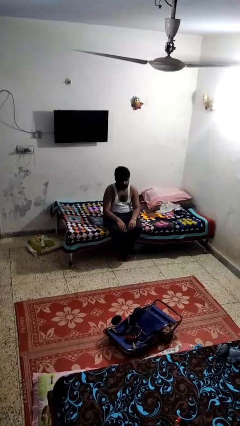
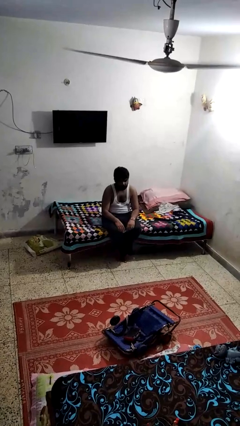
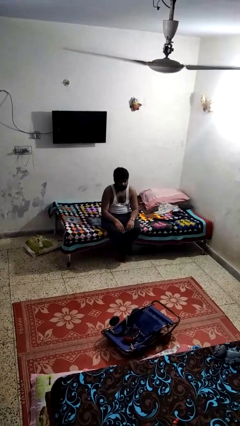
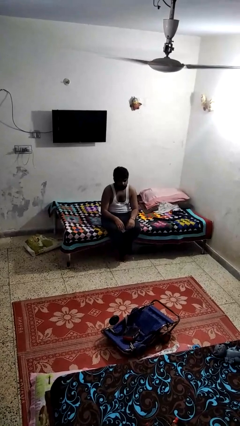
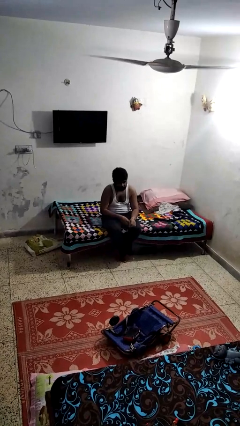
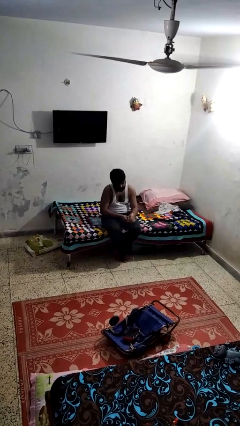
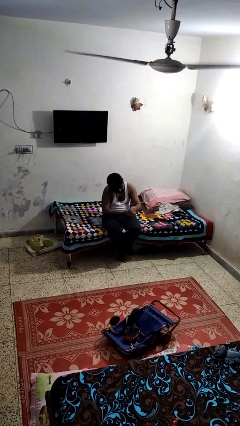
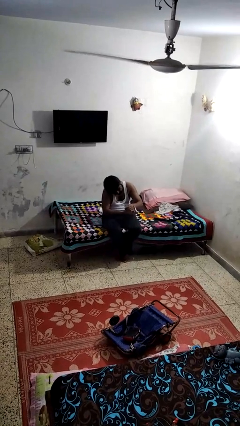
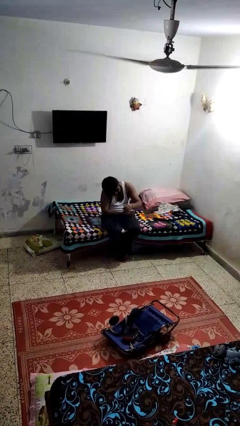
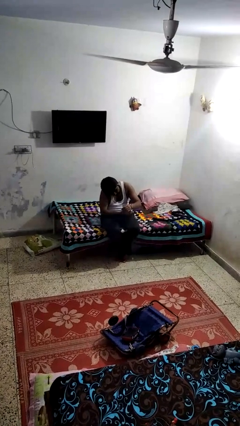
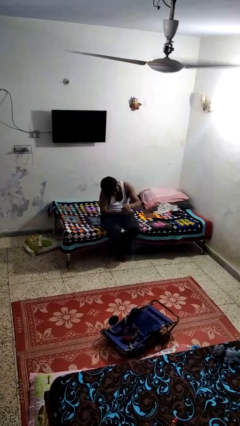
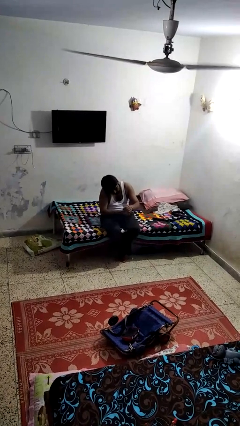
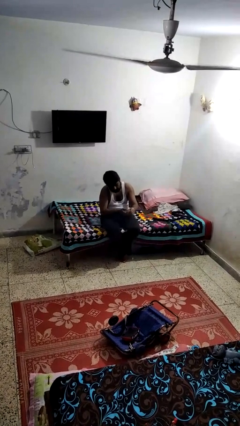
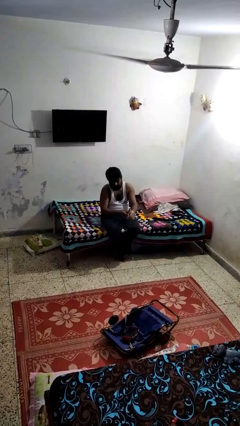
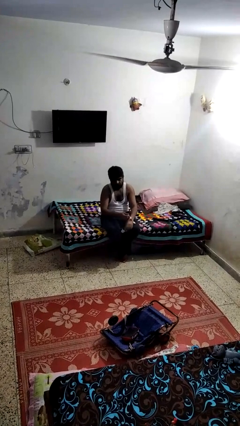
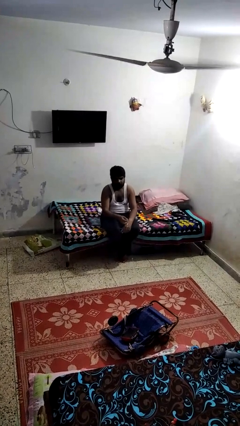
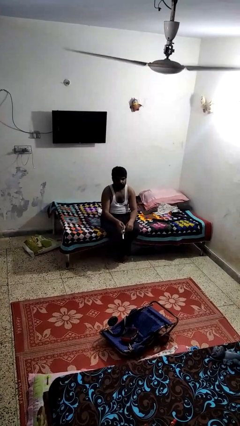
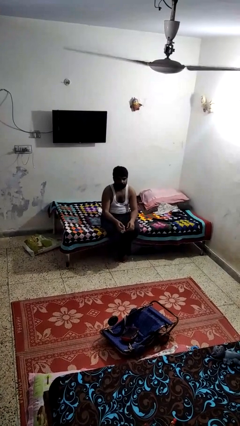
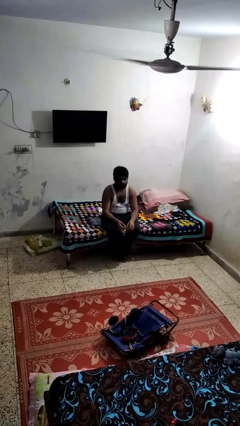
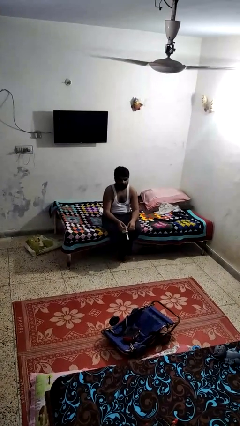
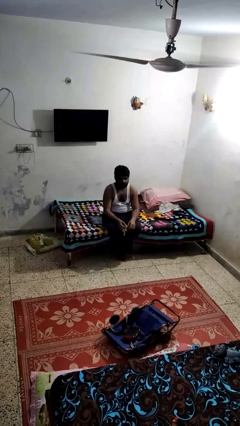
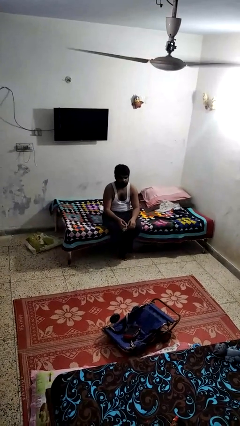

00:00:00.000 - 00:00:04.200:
person takes off wristwatch

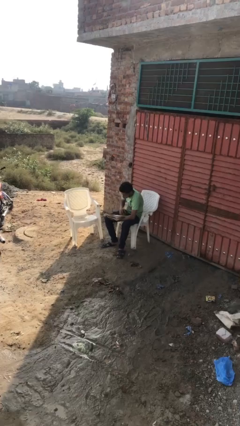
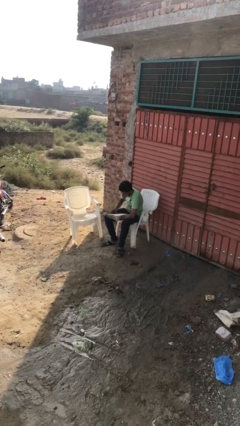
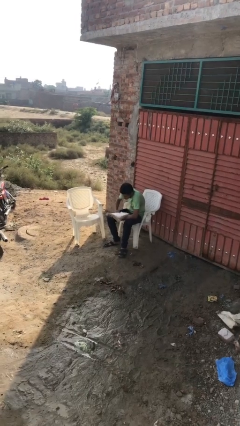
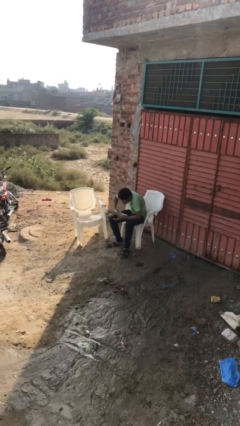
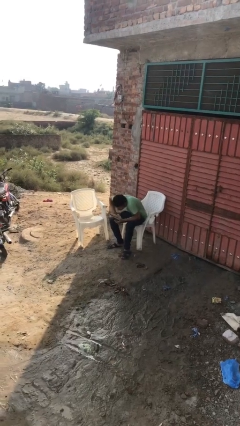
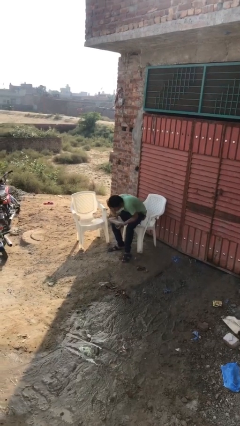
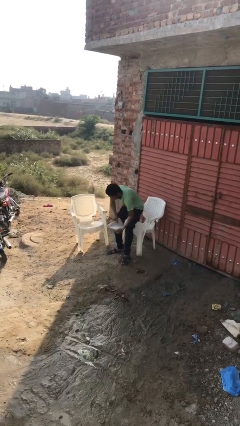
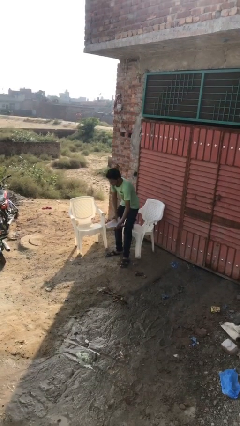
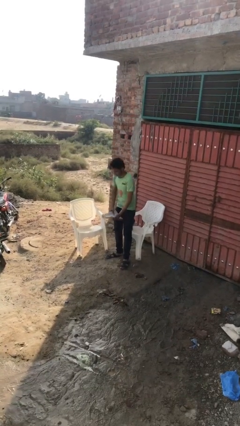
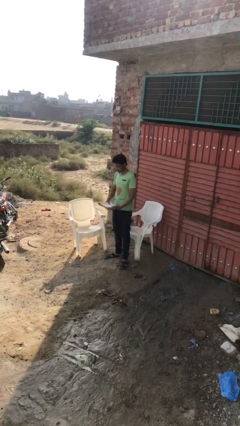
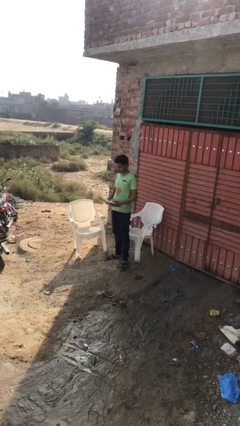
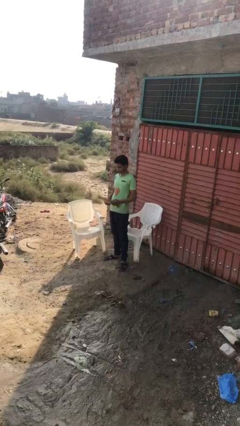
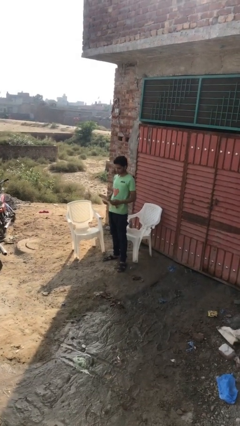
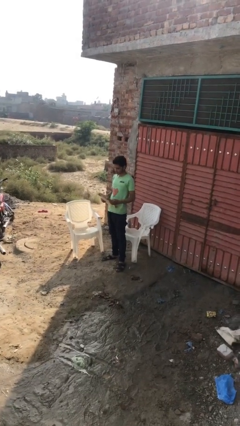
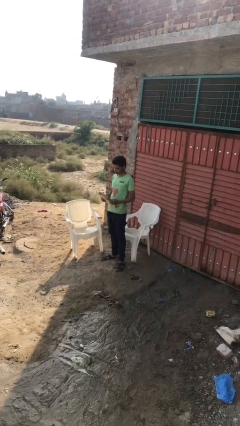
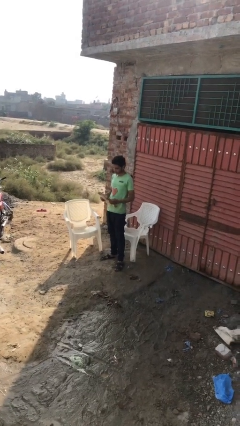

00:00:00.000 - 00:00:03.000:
person stands up

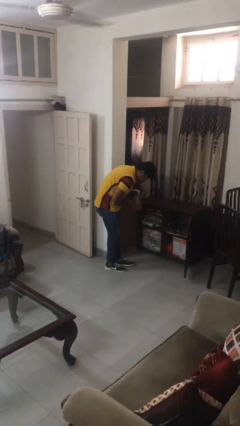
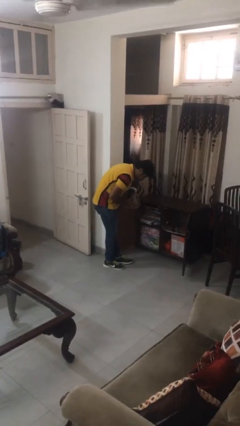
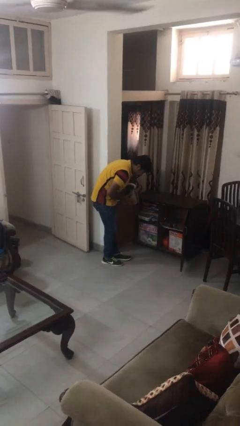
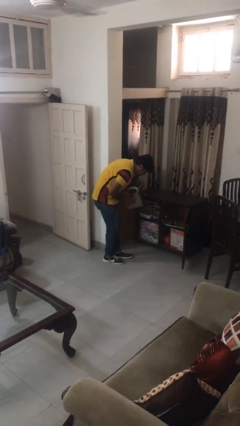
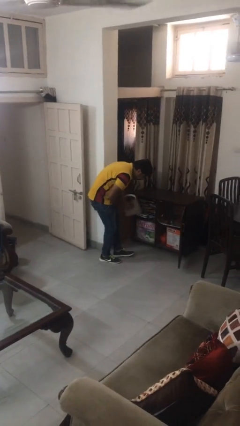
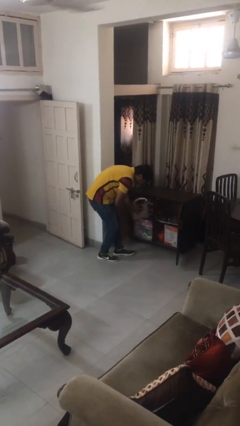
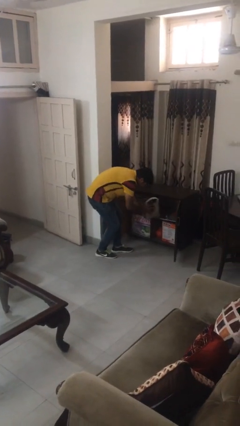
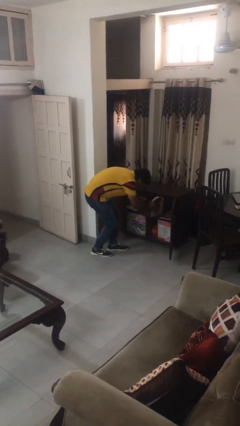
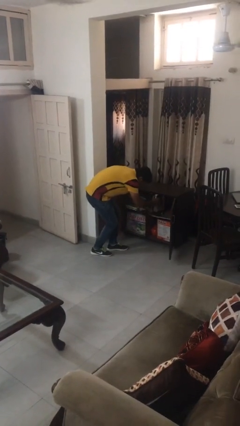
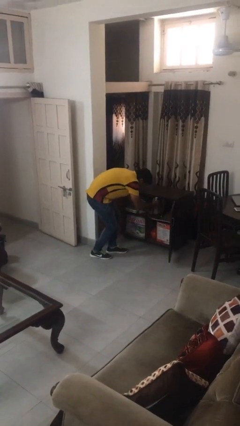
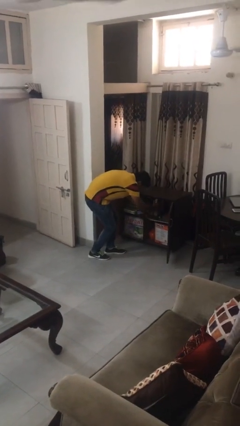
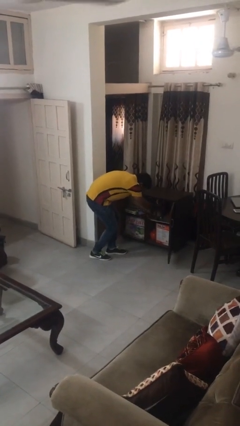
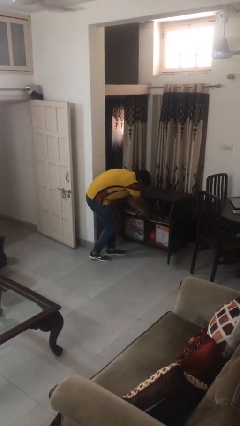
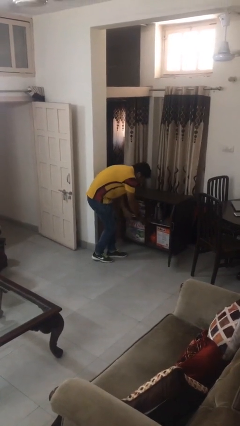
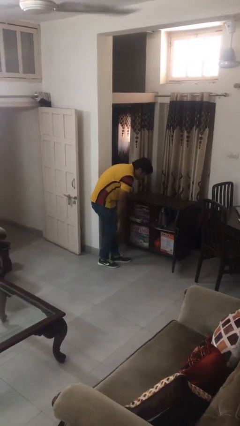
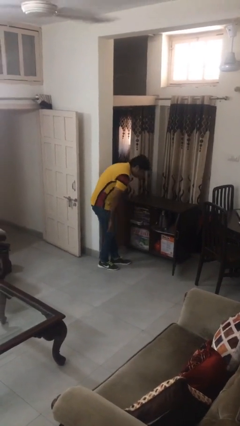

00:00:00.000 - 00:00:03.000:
person puts down object into cabinet

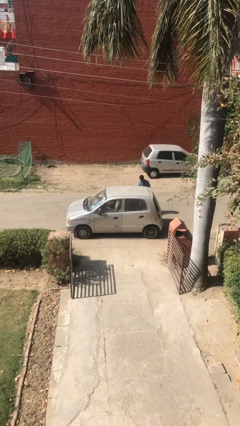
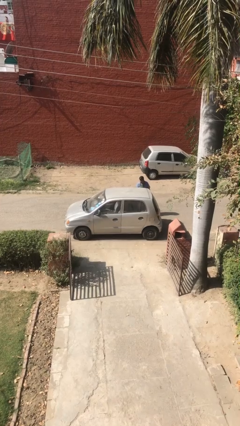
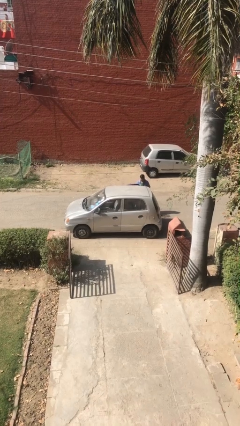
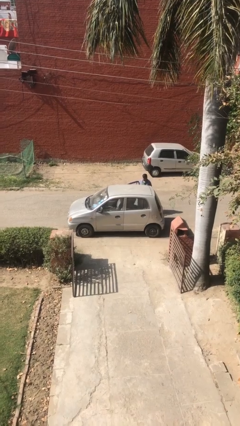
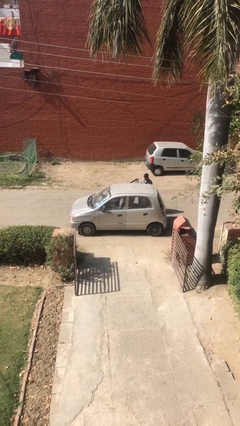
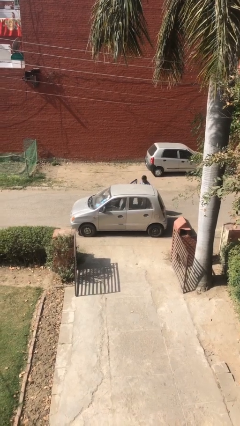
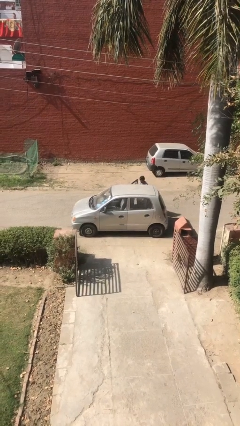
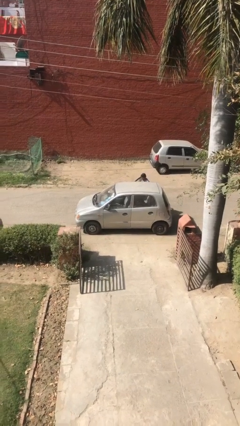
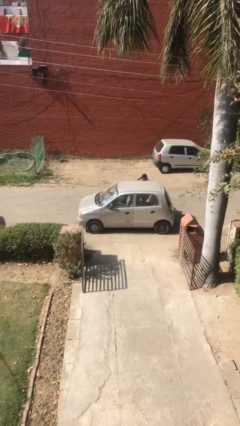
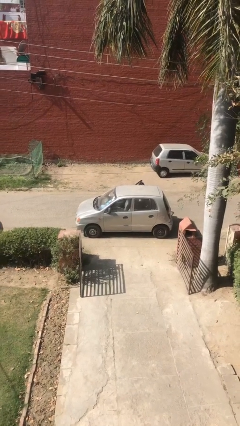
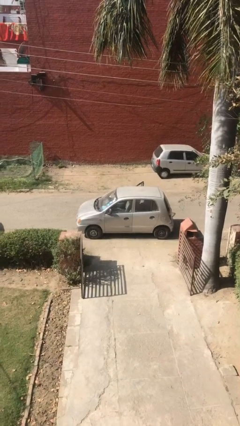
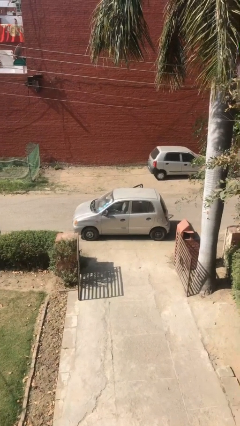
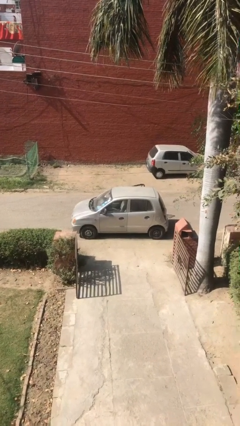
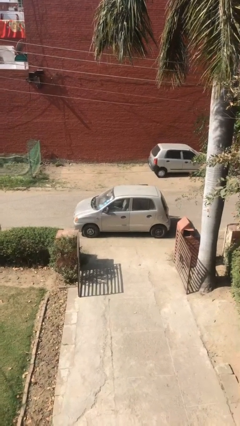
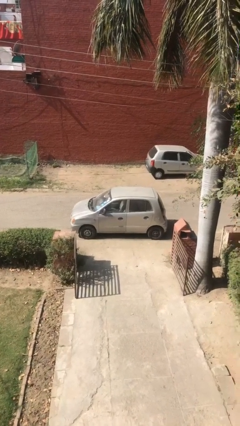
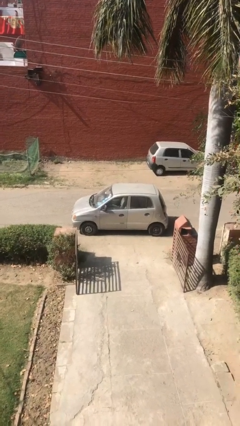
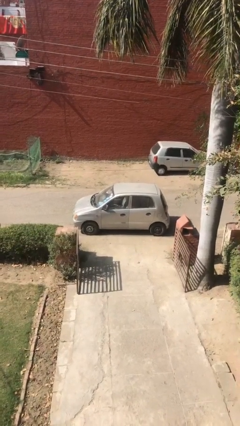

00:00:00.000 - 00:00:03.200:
car picks up person

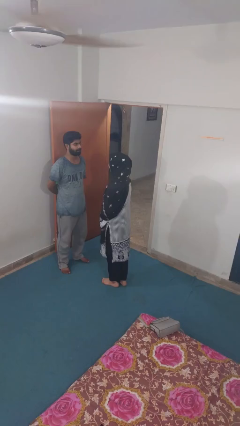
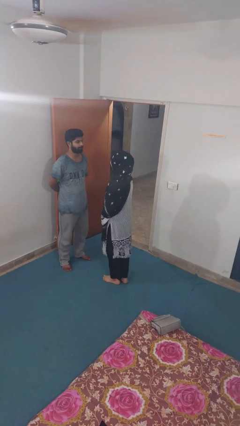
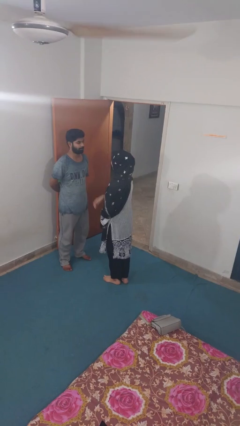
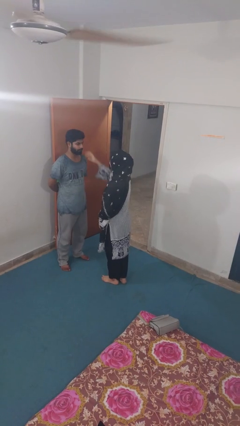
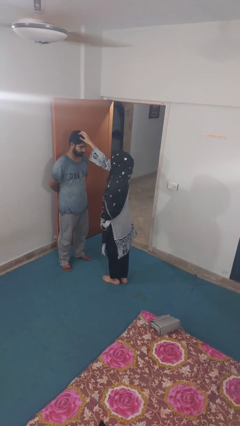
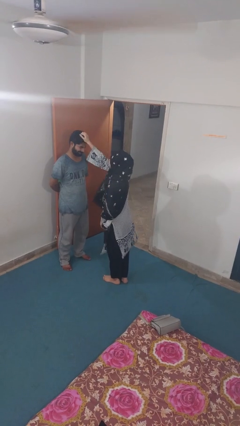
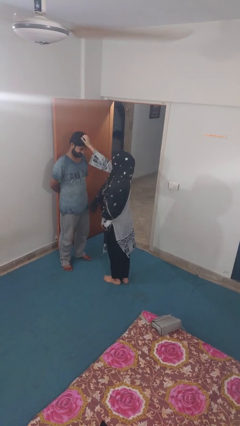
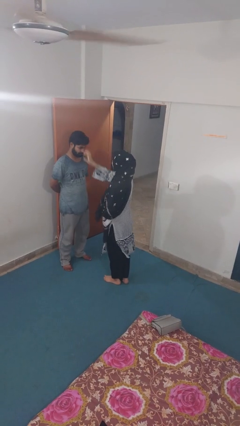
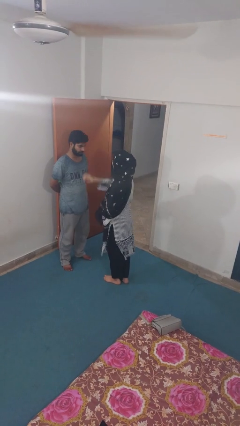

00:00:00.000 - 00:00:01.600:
person grabs person by hair

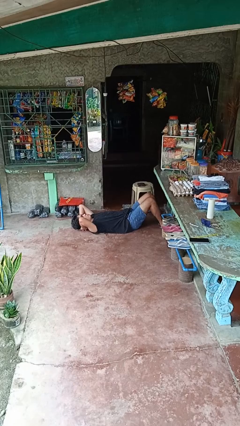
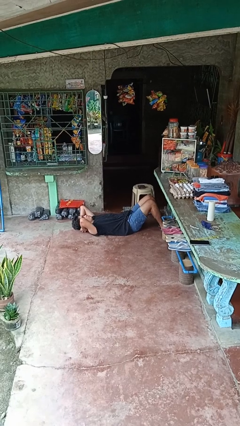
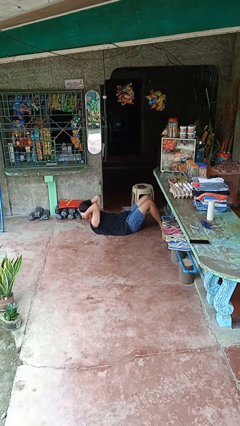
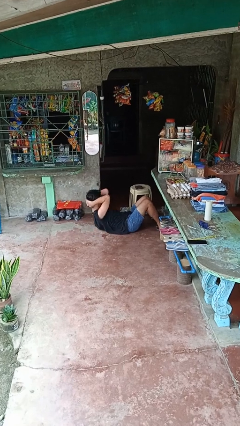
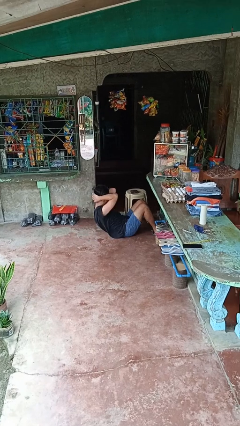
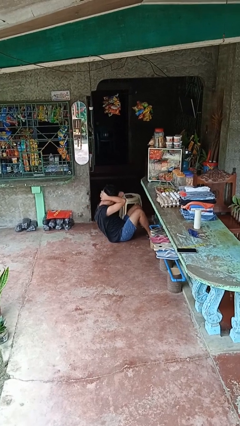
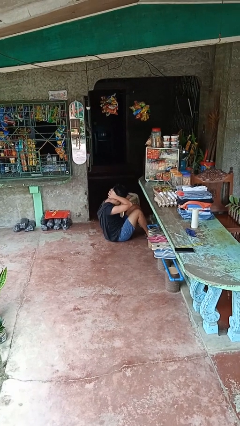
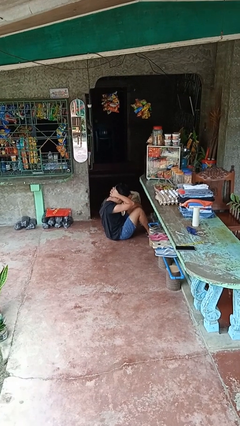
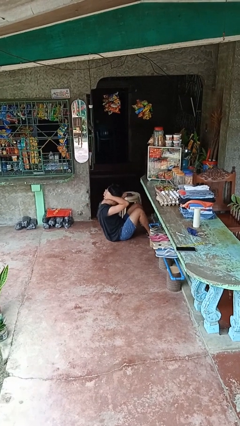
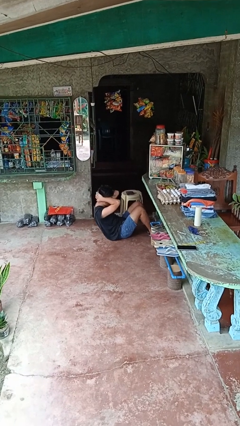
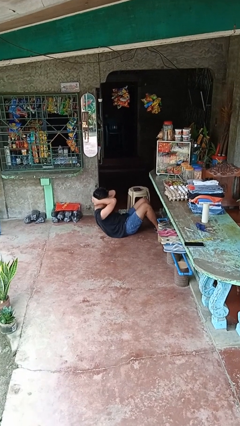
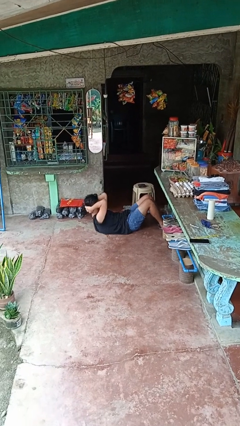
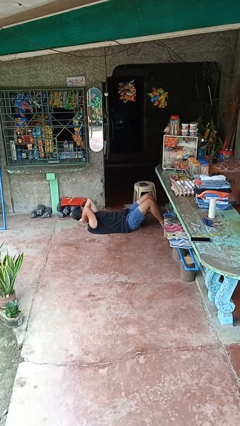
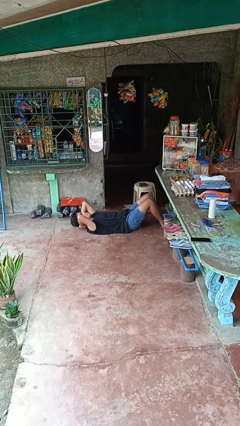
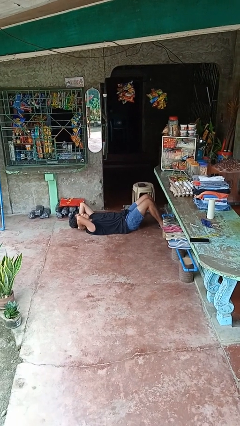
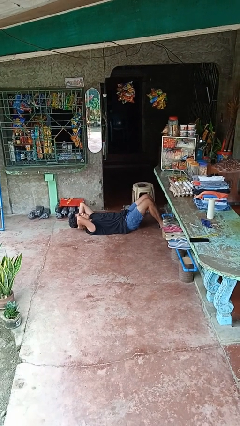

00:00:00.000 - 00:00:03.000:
person exercises with situp
